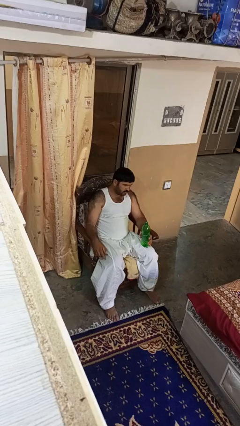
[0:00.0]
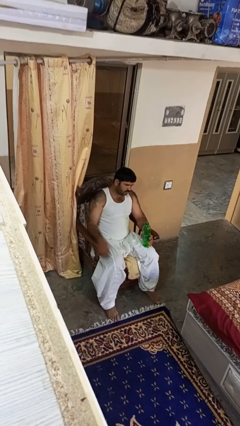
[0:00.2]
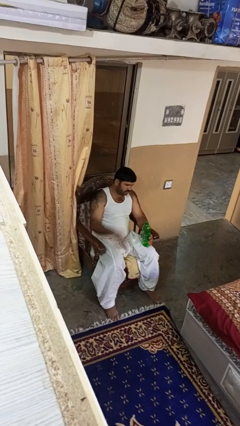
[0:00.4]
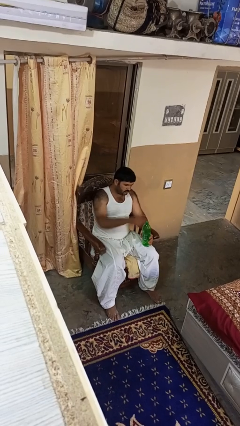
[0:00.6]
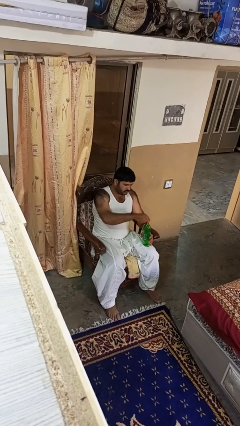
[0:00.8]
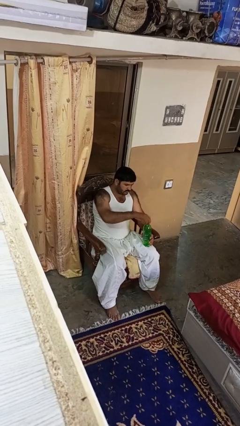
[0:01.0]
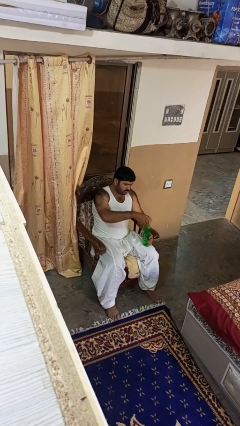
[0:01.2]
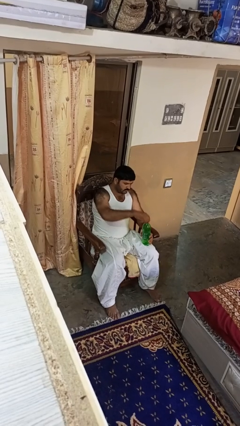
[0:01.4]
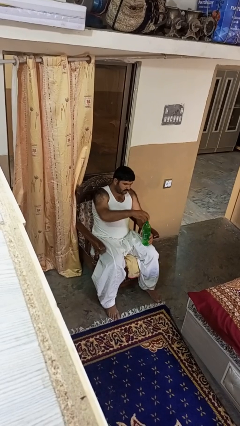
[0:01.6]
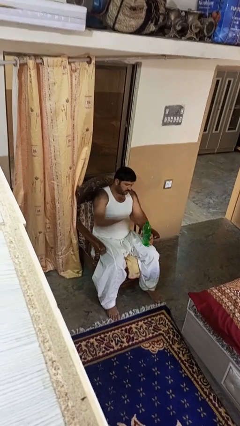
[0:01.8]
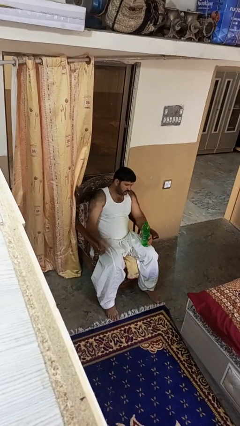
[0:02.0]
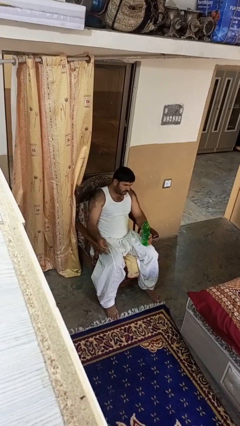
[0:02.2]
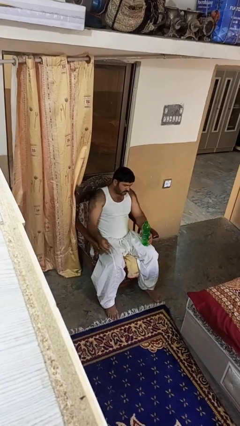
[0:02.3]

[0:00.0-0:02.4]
person unscrews lid from bottle

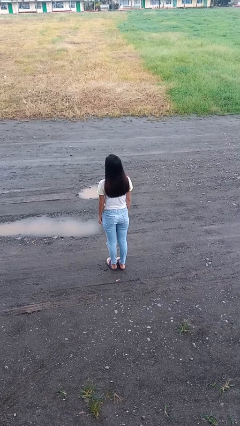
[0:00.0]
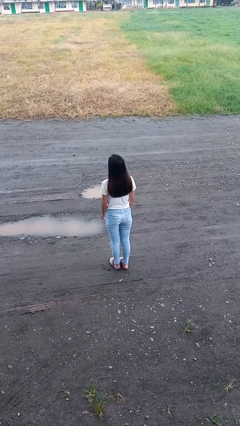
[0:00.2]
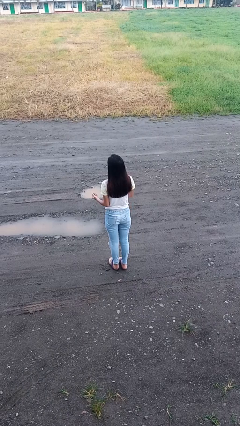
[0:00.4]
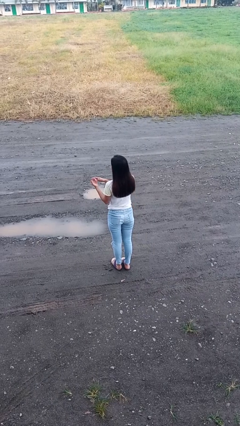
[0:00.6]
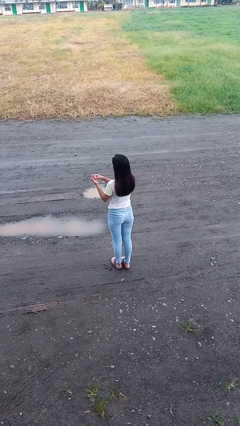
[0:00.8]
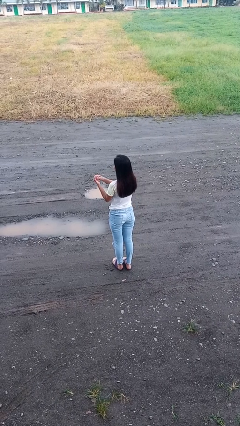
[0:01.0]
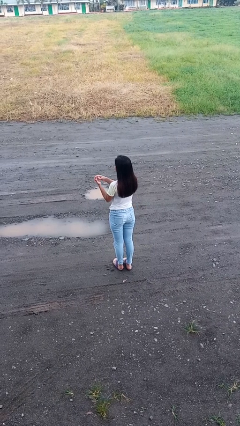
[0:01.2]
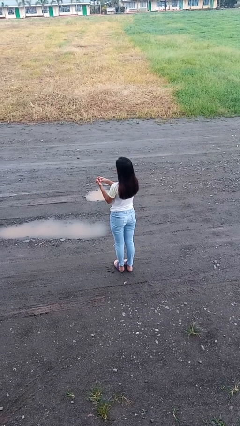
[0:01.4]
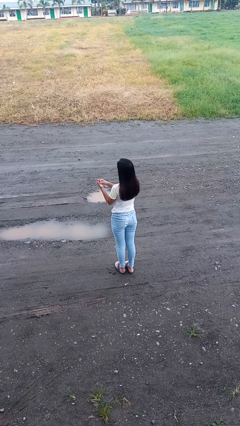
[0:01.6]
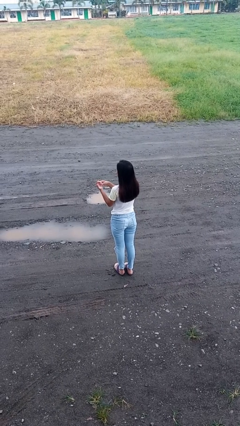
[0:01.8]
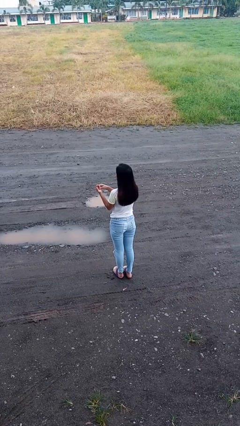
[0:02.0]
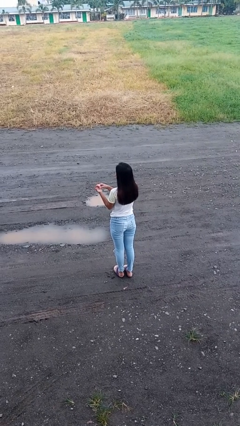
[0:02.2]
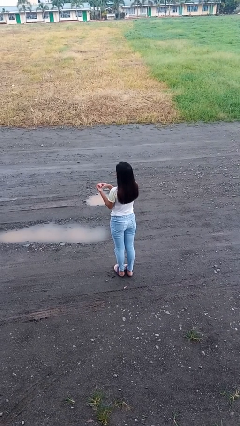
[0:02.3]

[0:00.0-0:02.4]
person cracks knuckles

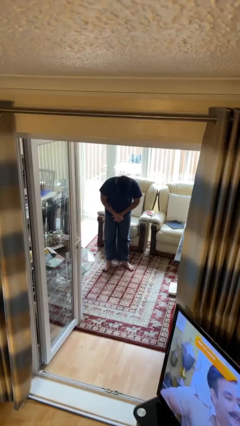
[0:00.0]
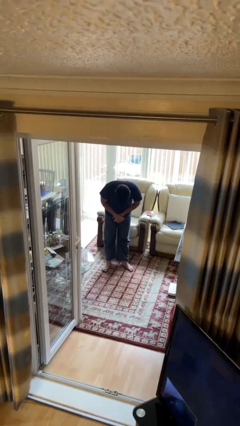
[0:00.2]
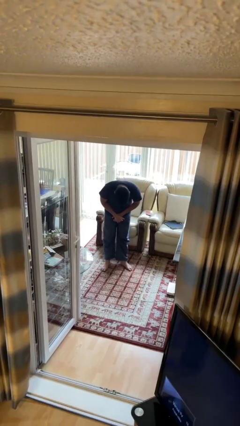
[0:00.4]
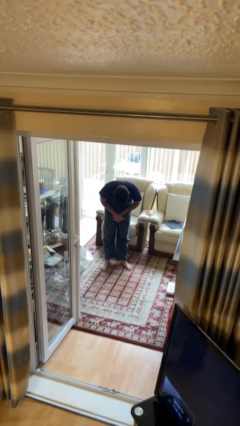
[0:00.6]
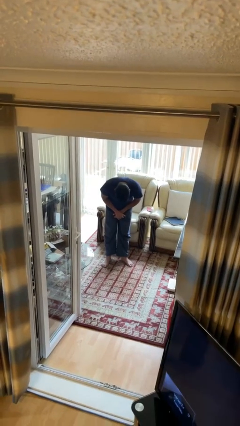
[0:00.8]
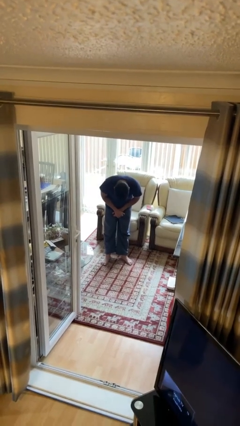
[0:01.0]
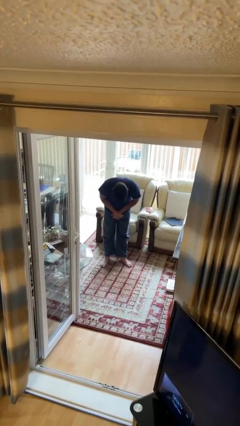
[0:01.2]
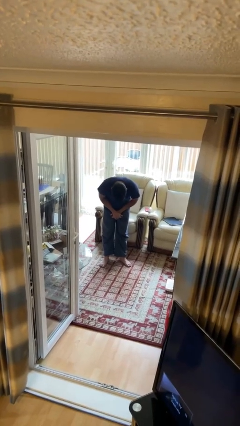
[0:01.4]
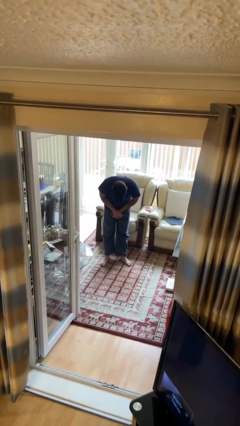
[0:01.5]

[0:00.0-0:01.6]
person bows

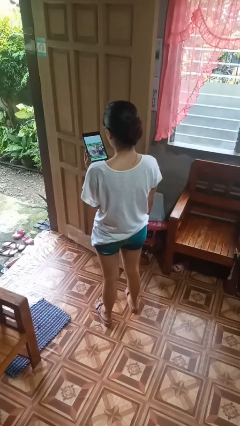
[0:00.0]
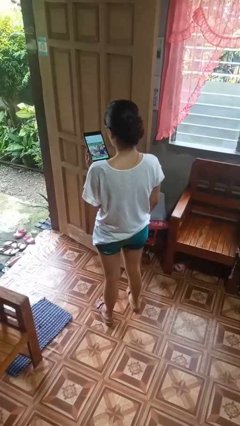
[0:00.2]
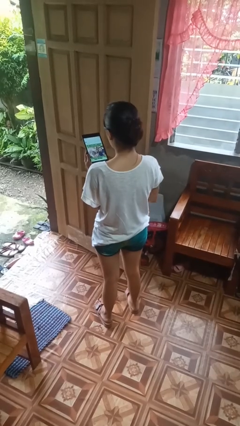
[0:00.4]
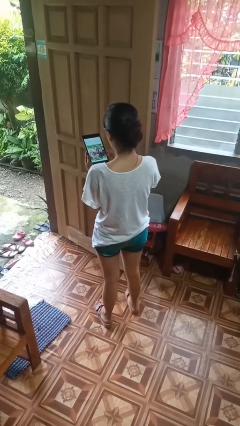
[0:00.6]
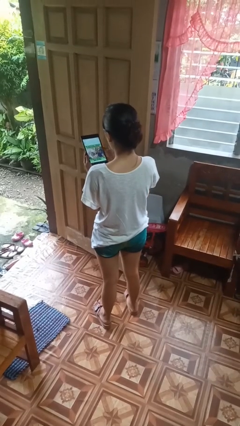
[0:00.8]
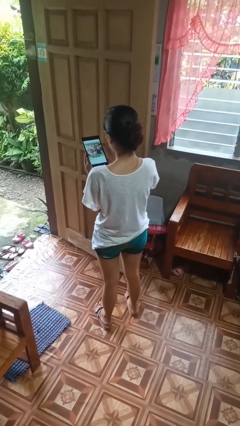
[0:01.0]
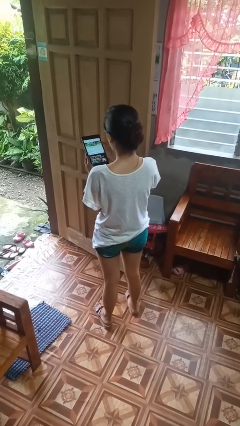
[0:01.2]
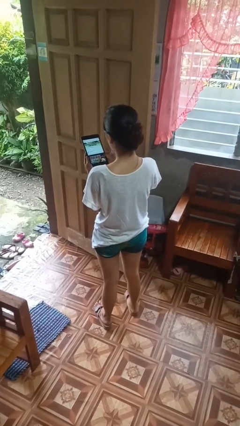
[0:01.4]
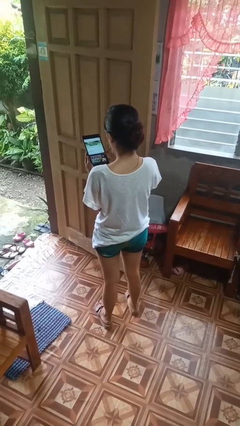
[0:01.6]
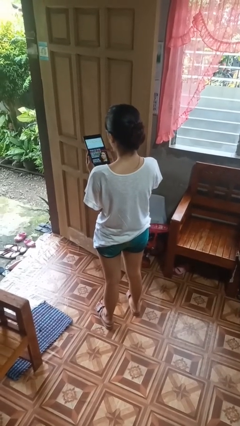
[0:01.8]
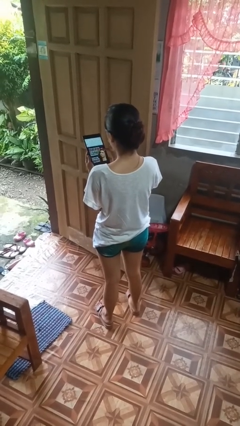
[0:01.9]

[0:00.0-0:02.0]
person interacts with tablet

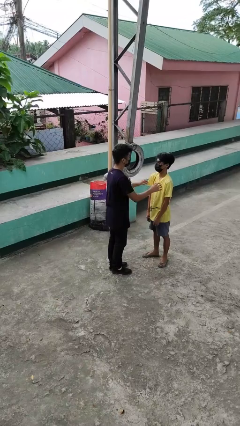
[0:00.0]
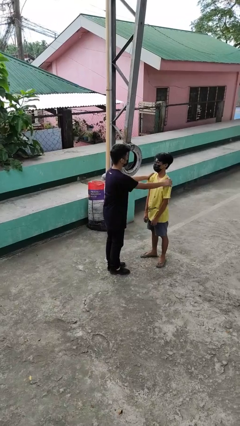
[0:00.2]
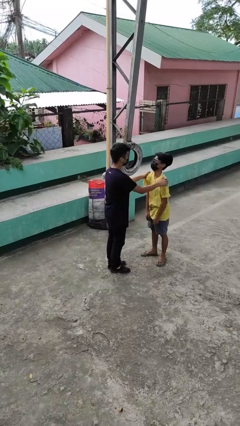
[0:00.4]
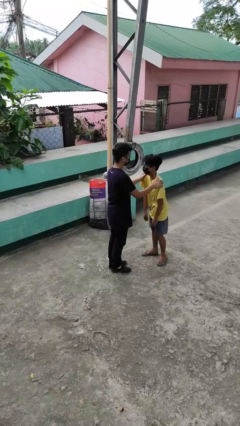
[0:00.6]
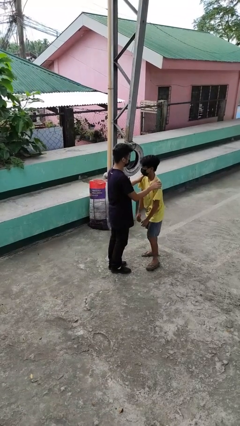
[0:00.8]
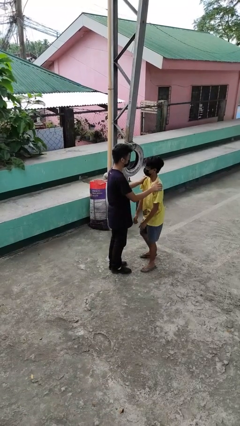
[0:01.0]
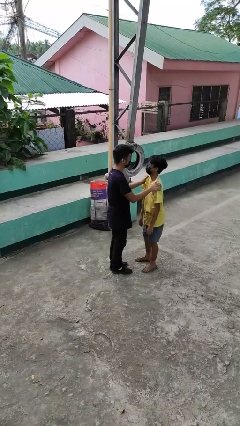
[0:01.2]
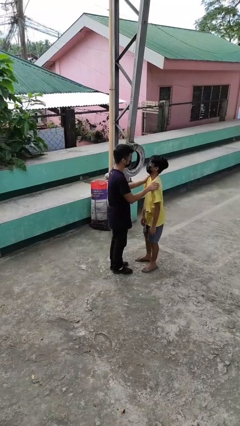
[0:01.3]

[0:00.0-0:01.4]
person grabs person by shoulder

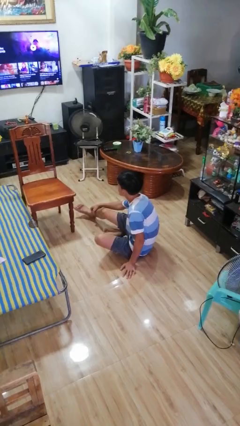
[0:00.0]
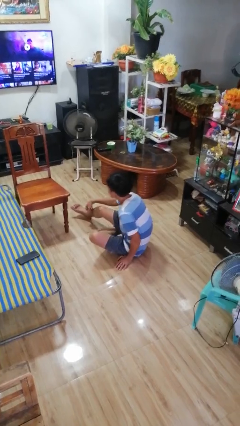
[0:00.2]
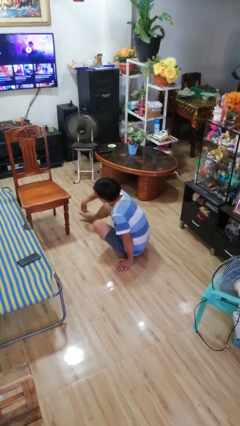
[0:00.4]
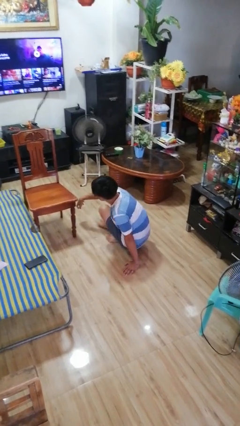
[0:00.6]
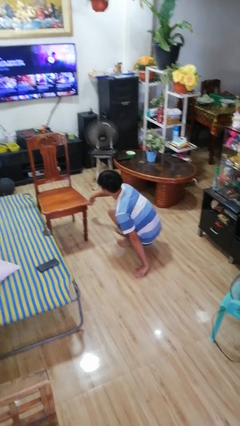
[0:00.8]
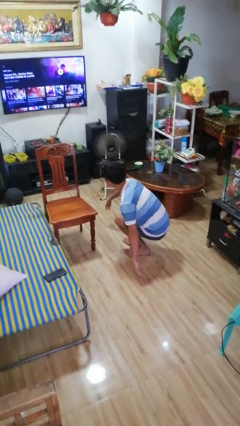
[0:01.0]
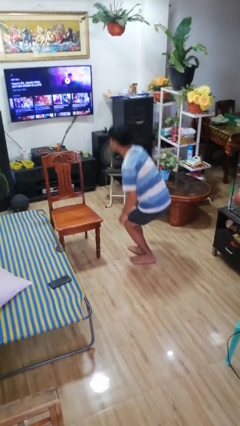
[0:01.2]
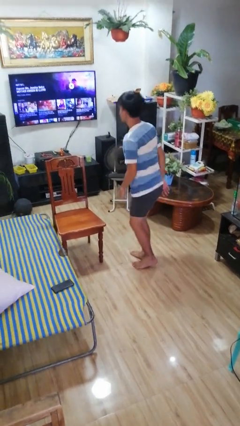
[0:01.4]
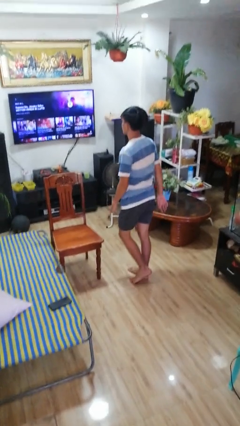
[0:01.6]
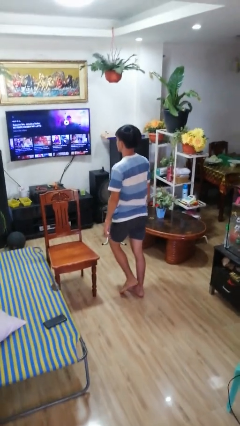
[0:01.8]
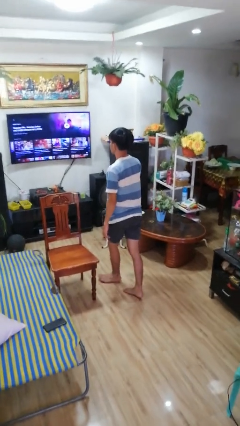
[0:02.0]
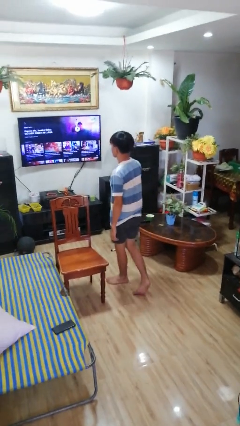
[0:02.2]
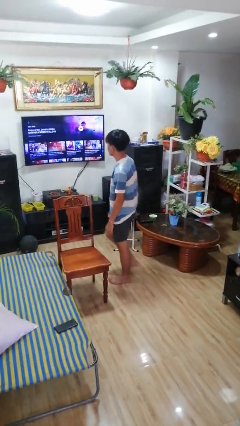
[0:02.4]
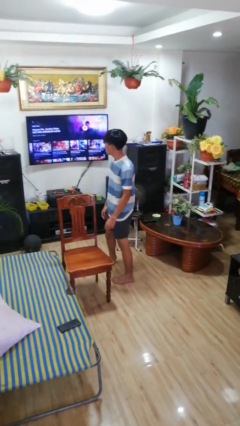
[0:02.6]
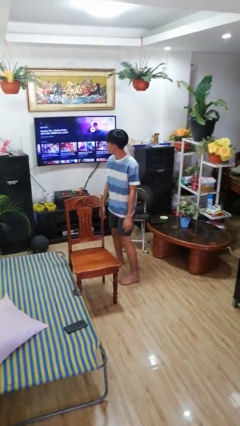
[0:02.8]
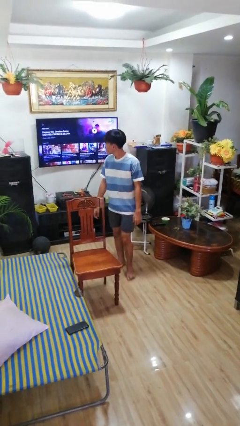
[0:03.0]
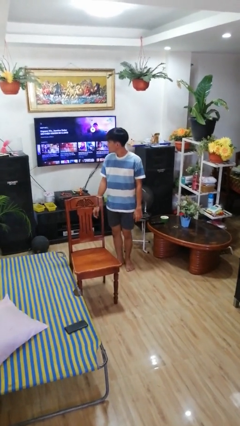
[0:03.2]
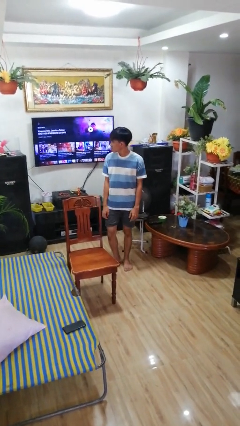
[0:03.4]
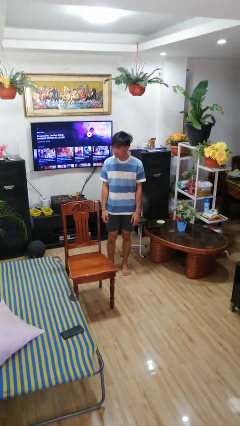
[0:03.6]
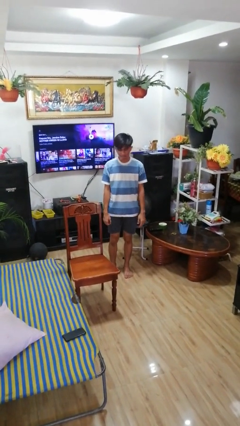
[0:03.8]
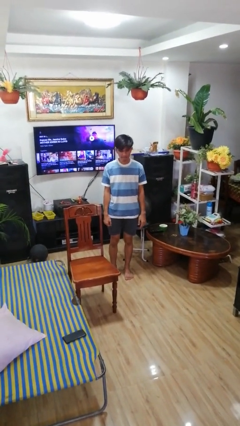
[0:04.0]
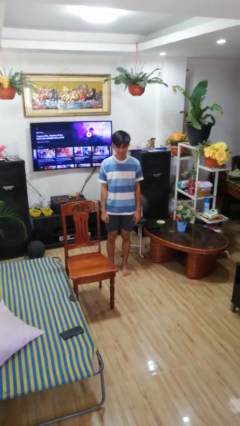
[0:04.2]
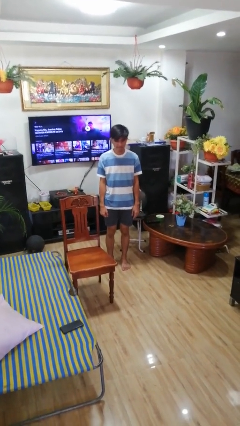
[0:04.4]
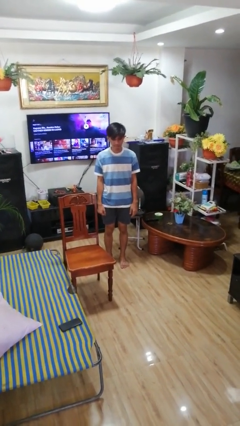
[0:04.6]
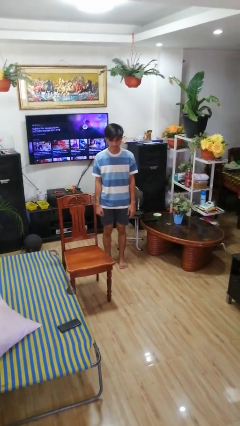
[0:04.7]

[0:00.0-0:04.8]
person stands up from floor

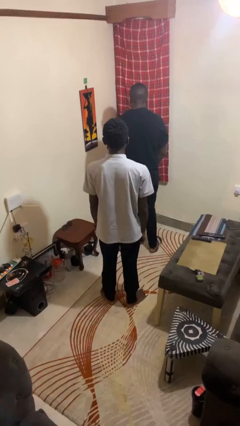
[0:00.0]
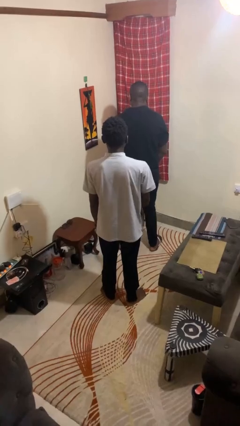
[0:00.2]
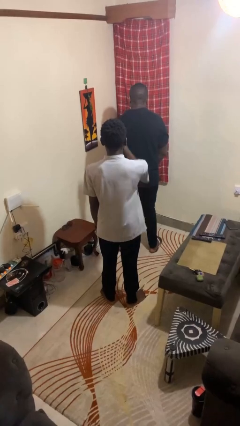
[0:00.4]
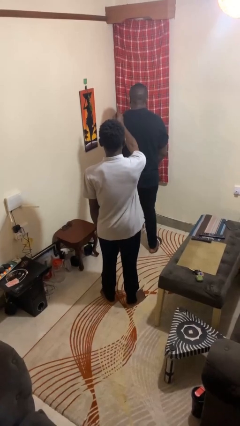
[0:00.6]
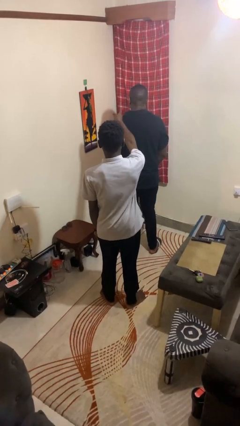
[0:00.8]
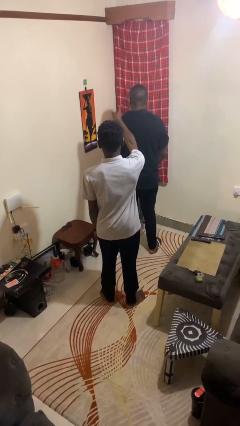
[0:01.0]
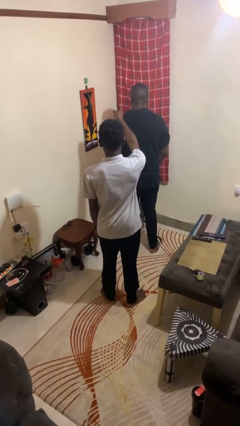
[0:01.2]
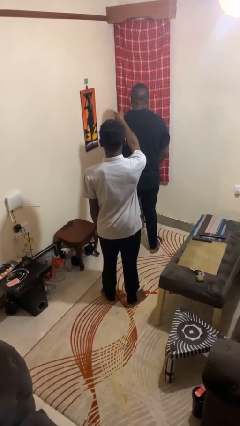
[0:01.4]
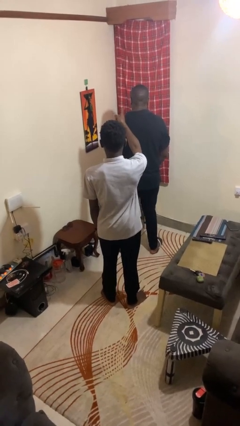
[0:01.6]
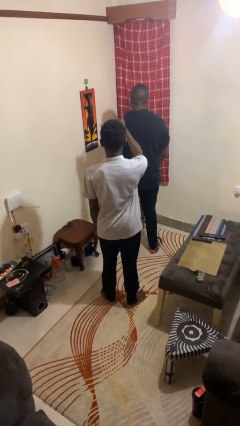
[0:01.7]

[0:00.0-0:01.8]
person points at person

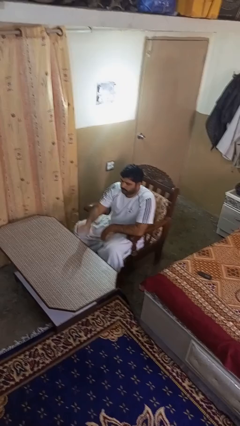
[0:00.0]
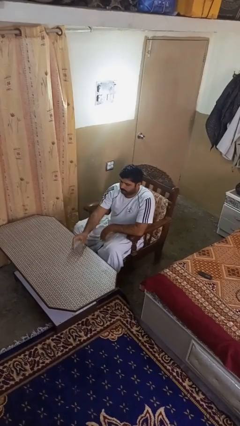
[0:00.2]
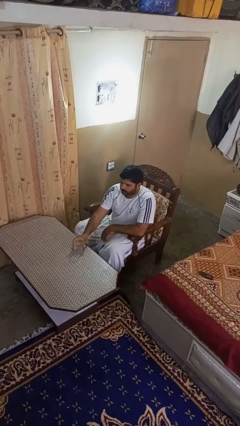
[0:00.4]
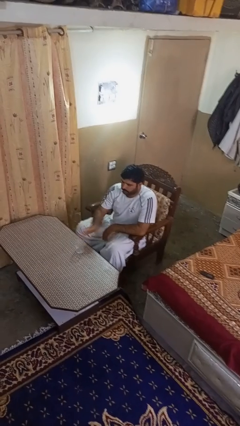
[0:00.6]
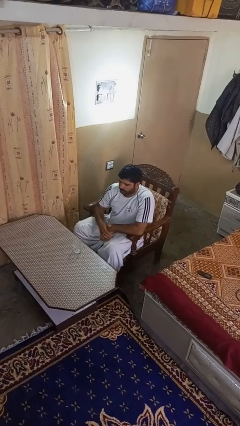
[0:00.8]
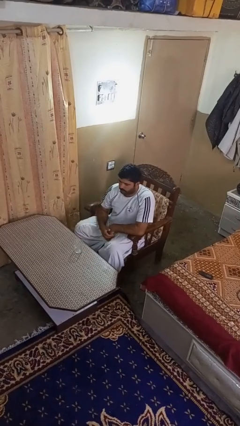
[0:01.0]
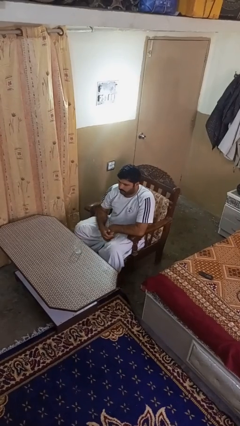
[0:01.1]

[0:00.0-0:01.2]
person puts down object on table
